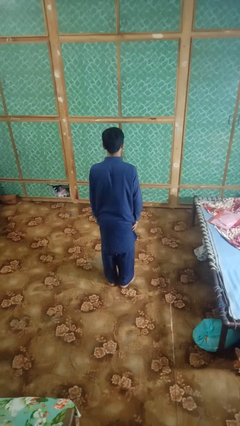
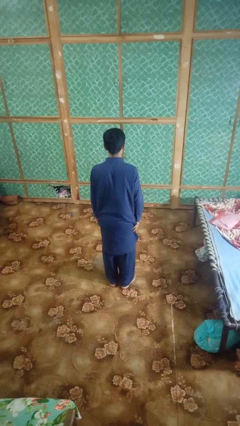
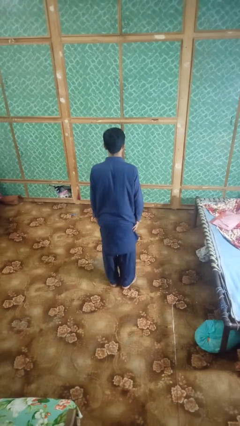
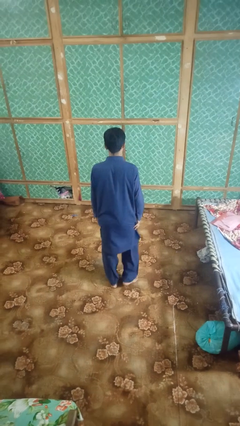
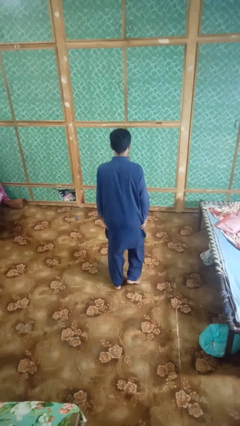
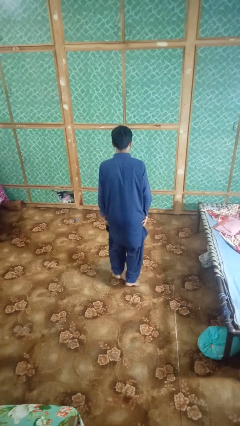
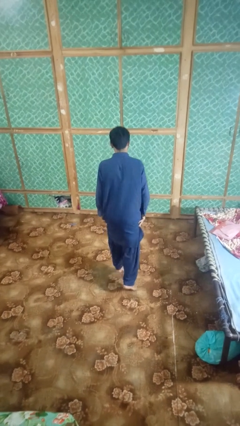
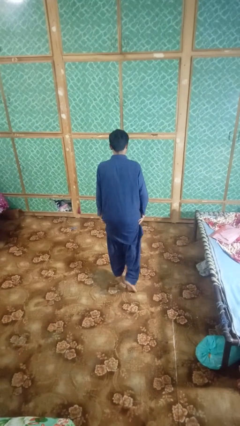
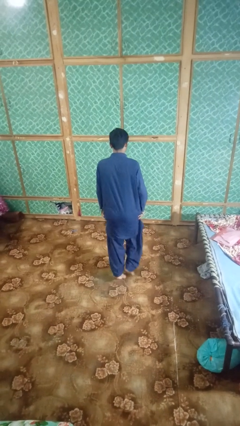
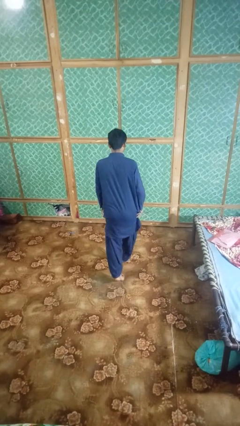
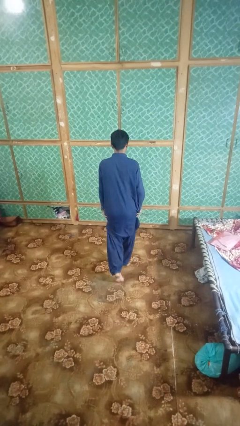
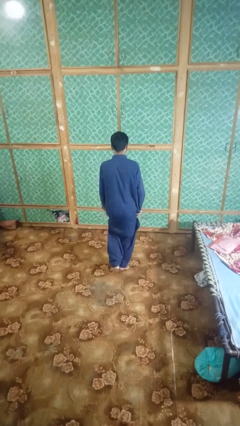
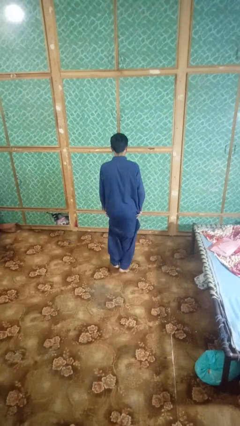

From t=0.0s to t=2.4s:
person walks tiptoe

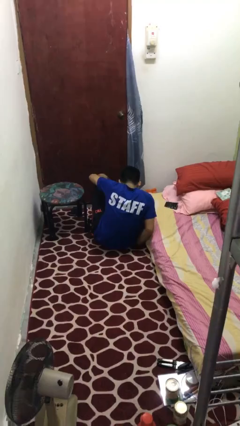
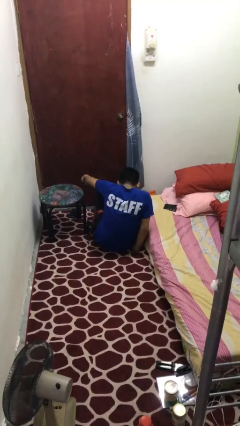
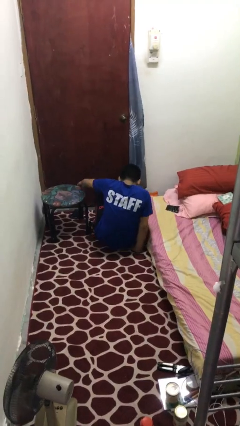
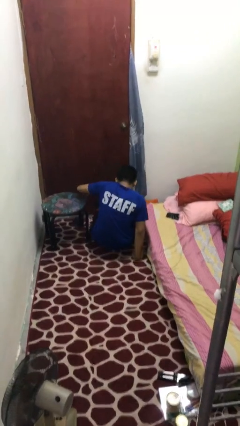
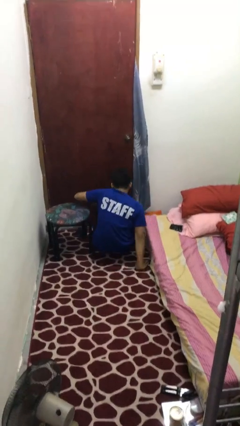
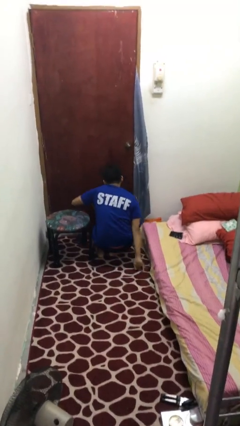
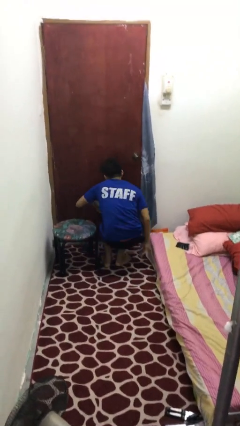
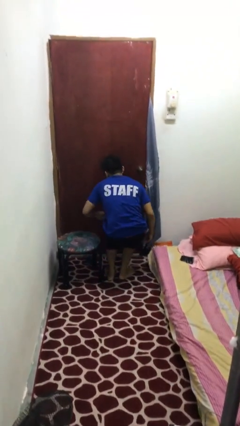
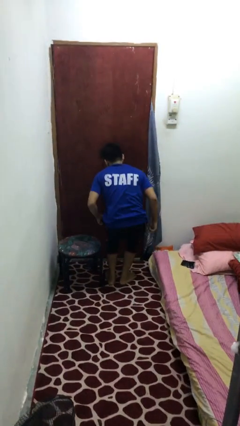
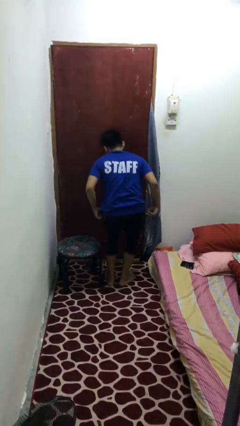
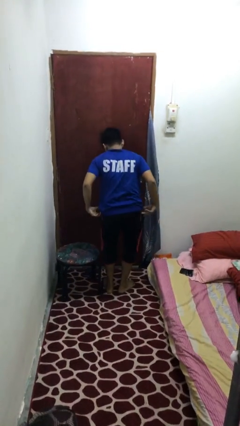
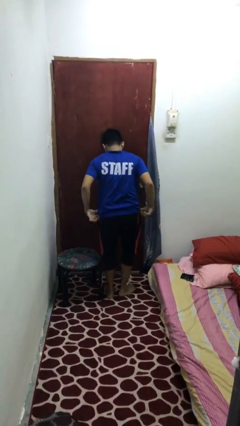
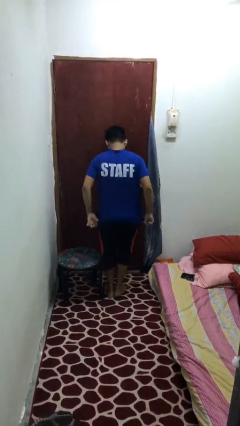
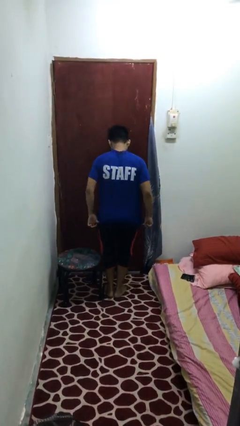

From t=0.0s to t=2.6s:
person stands up from floor

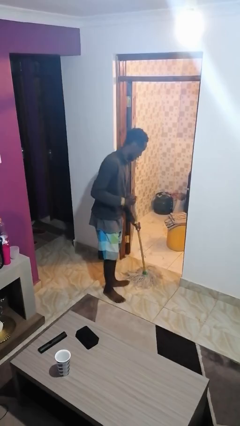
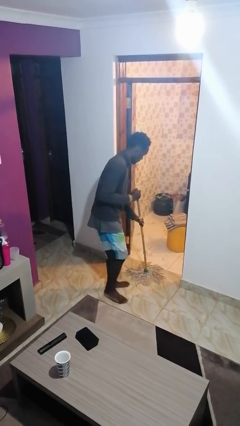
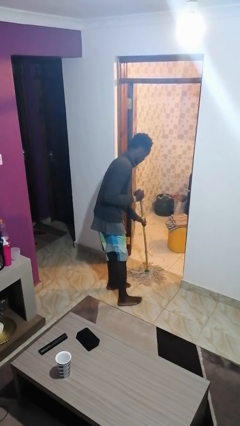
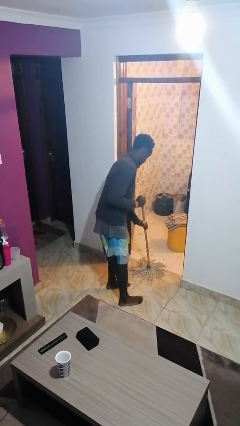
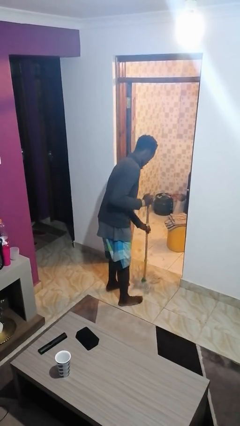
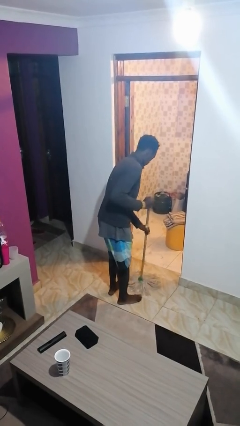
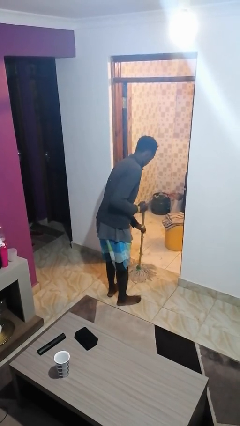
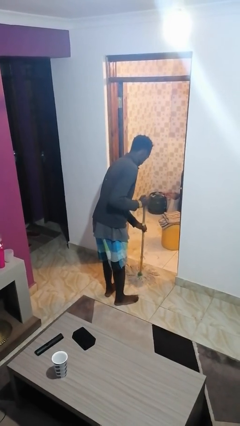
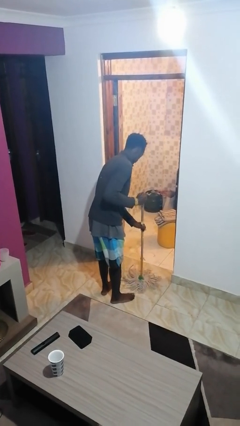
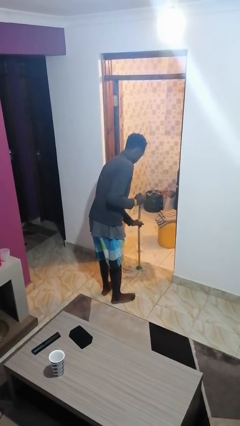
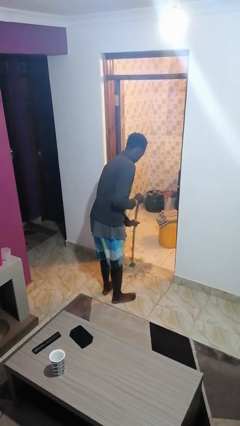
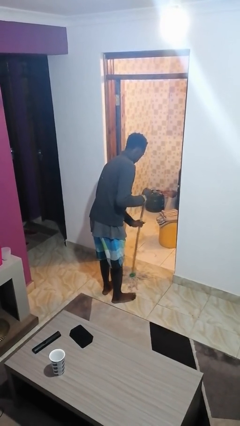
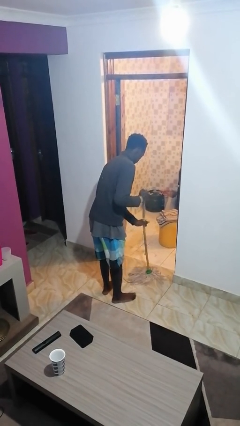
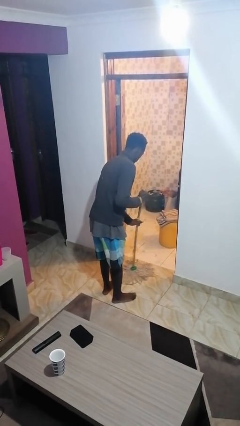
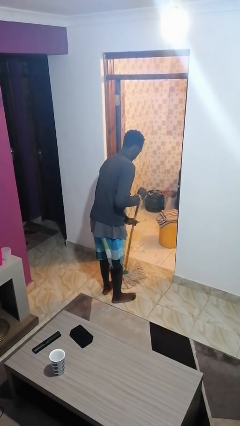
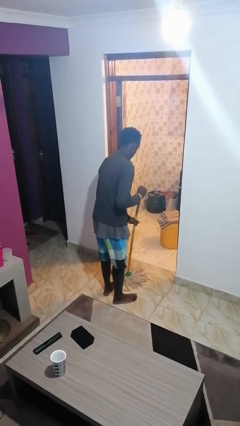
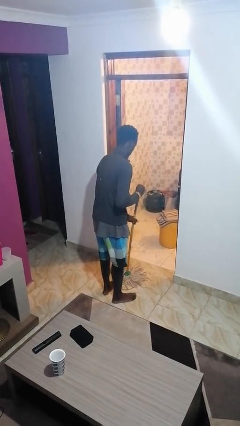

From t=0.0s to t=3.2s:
person mops

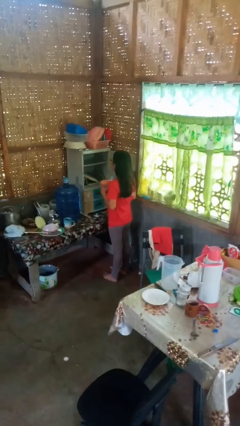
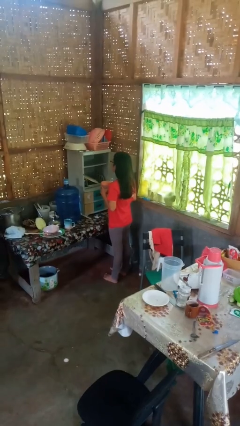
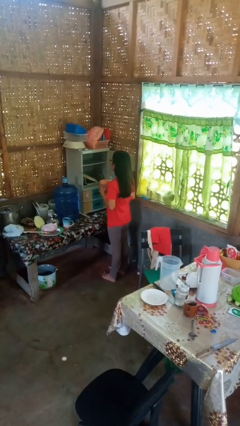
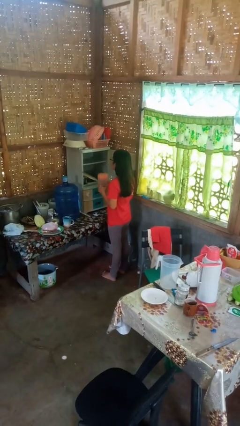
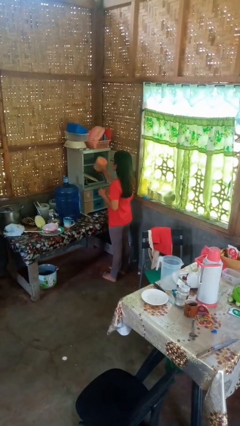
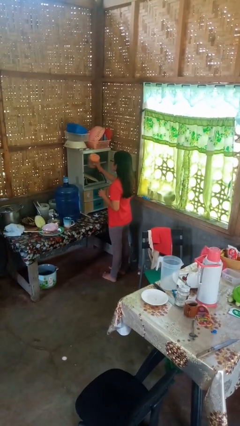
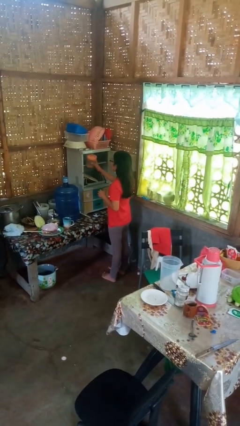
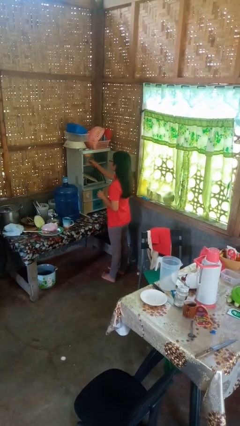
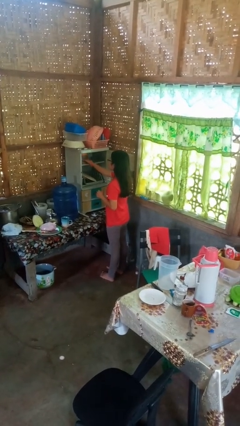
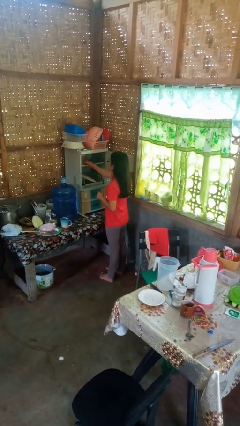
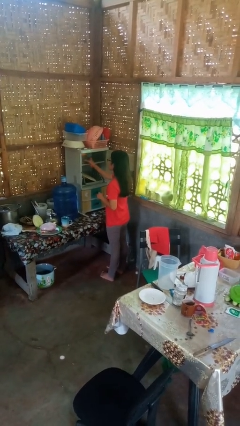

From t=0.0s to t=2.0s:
person puts down object into cabinet

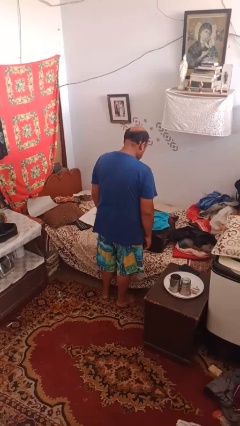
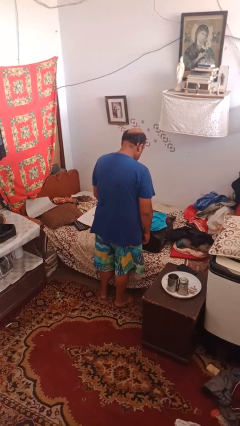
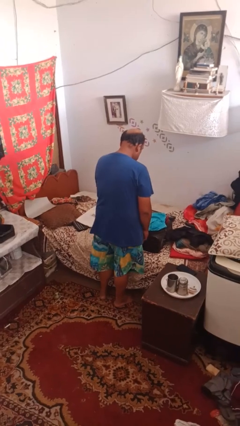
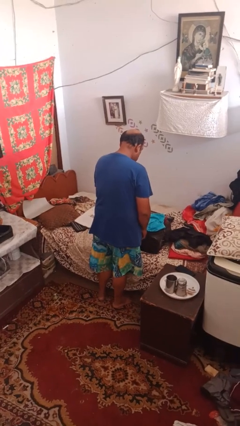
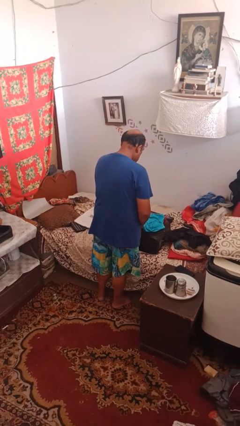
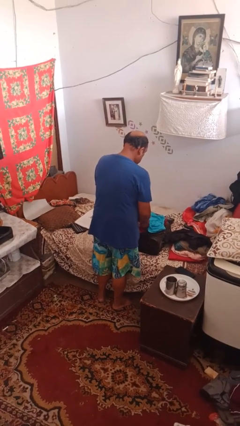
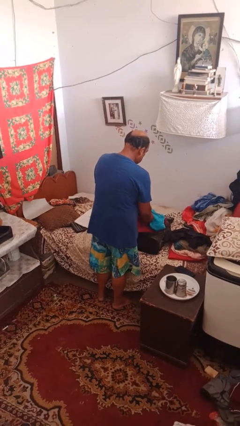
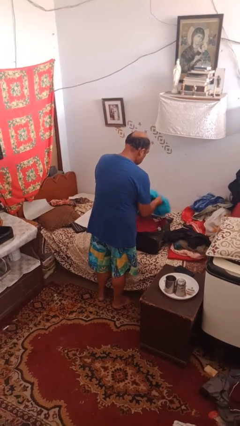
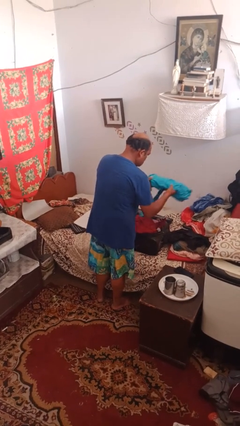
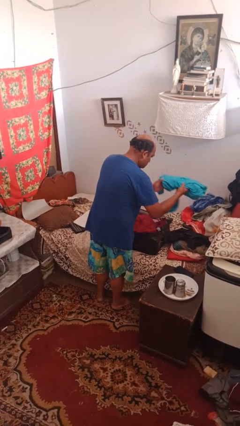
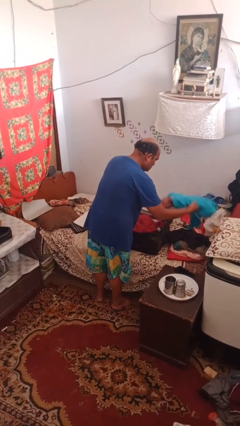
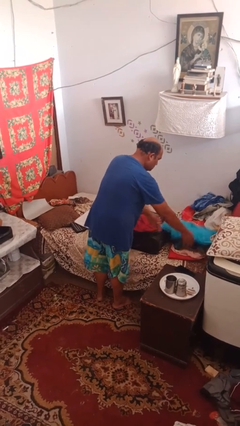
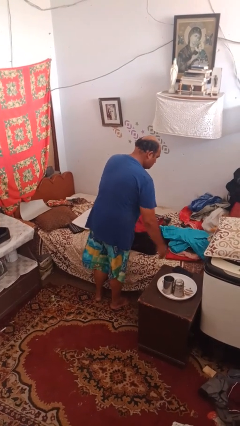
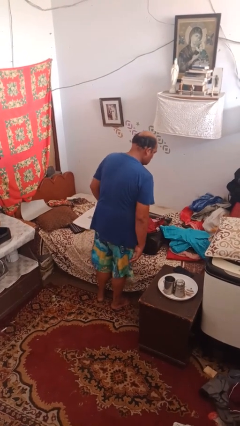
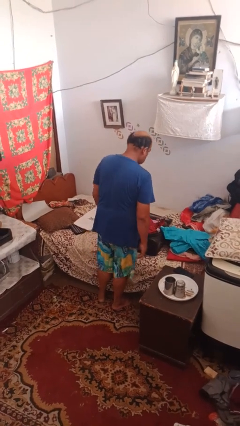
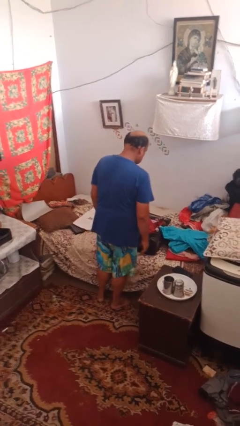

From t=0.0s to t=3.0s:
person unloads clothes from suitcase

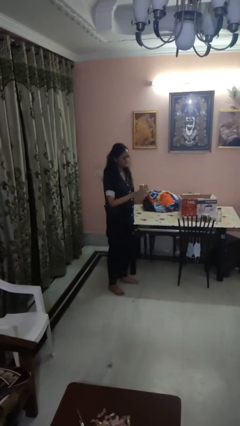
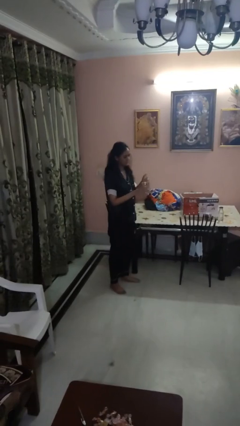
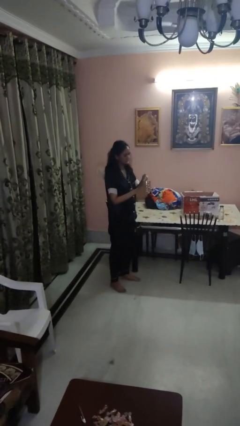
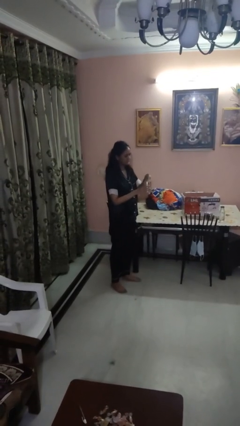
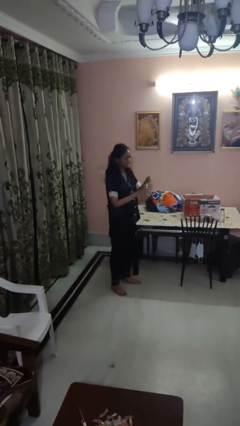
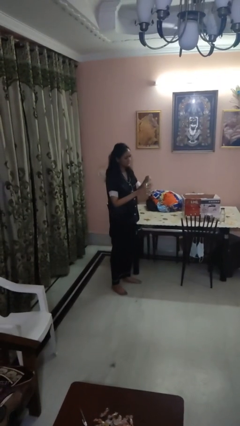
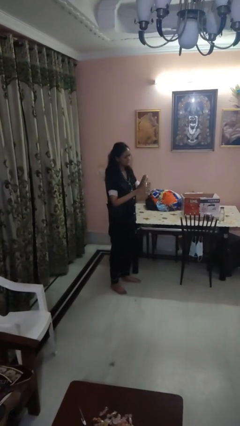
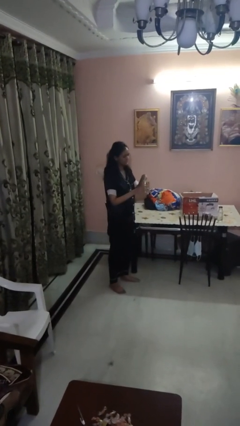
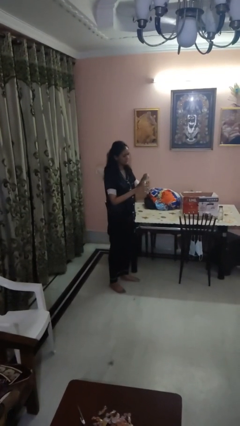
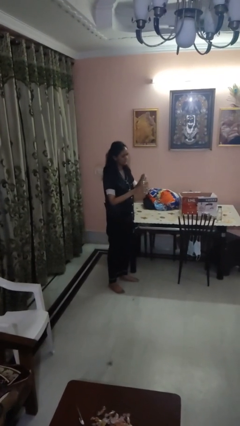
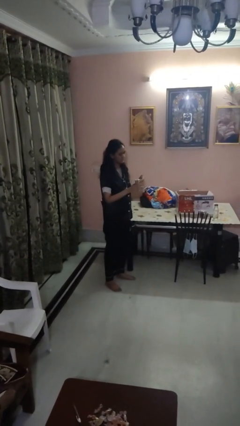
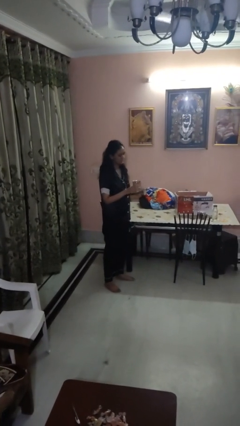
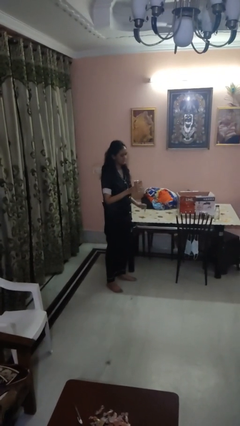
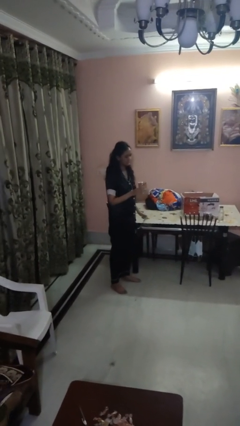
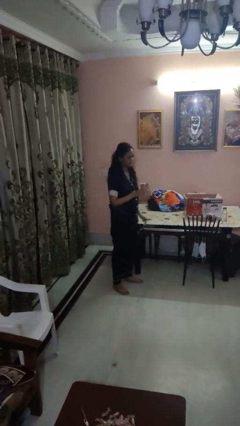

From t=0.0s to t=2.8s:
person opens can with can opener

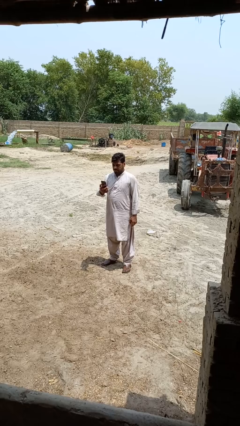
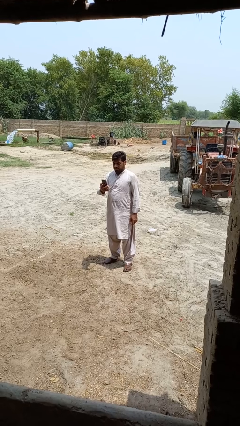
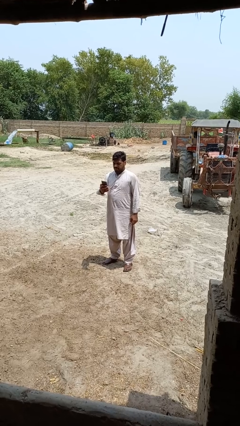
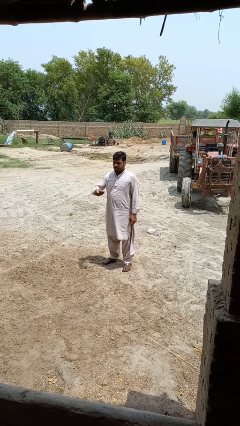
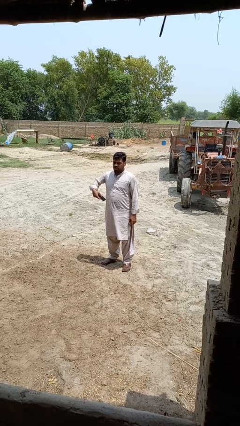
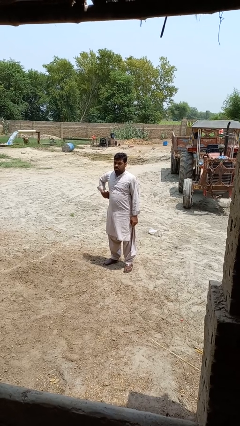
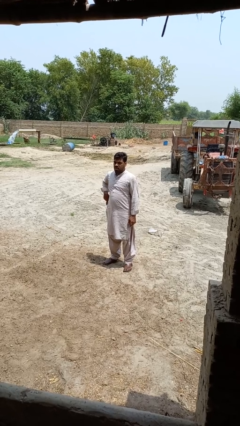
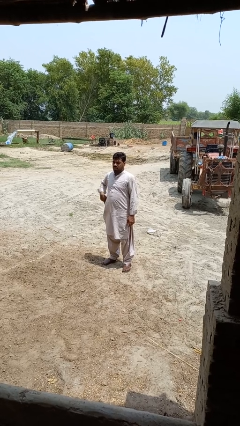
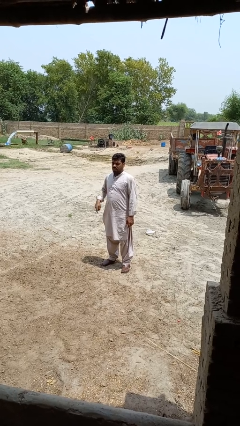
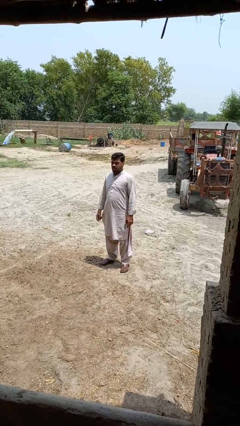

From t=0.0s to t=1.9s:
person puts phone into pocket
